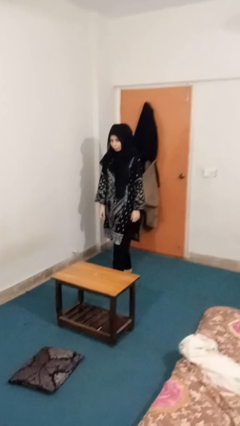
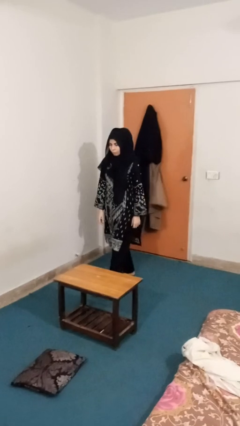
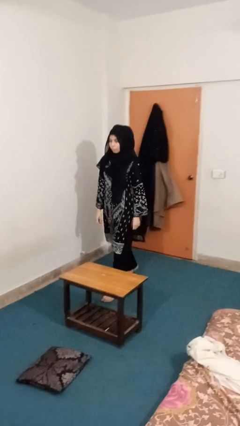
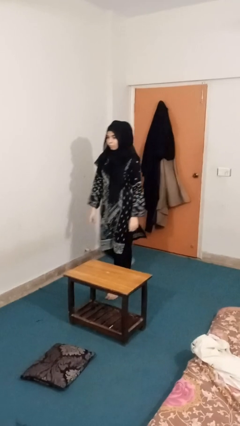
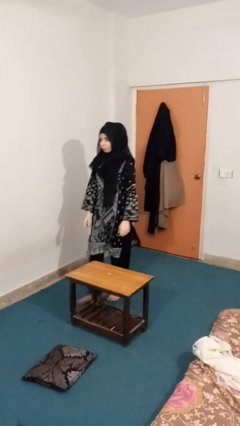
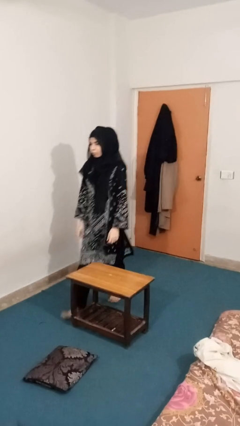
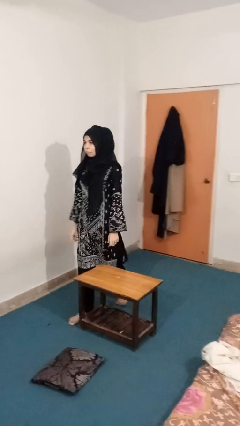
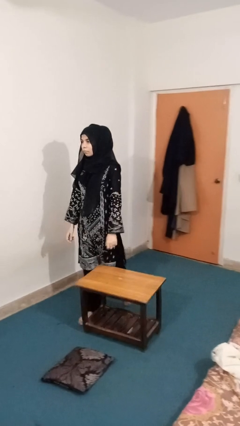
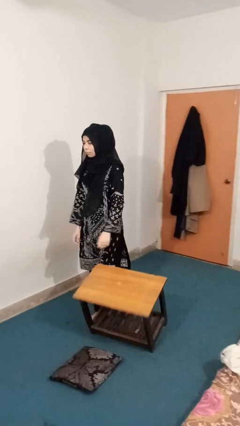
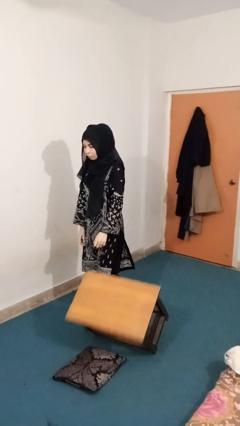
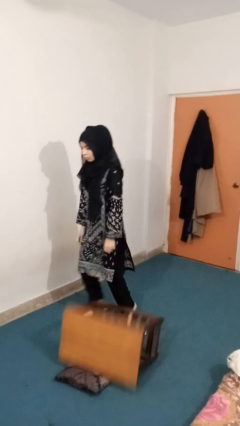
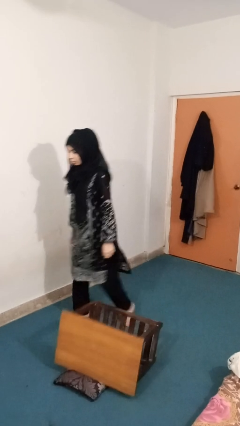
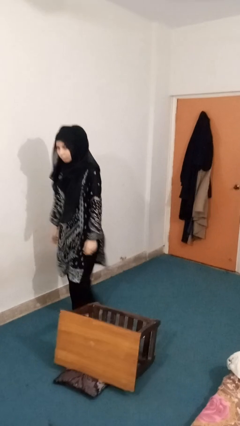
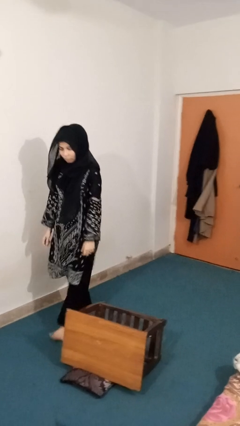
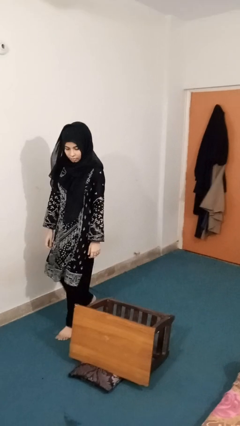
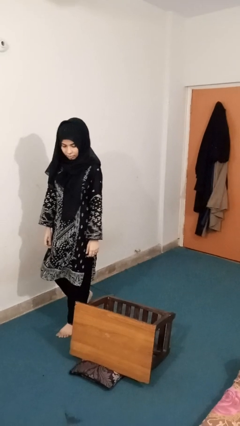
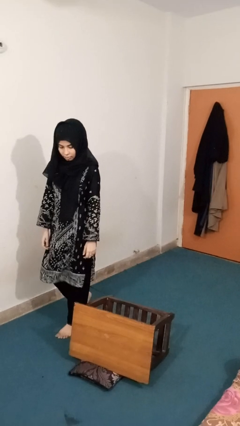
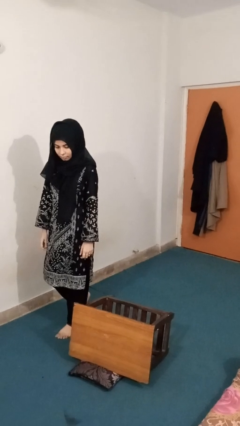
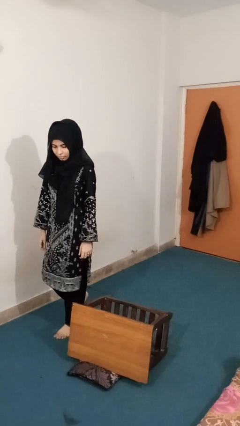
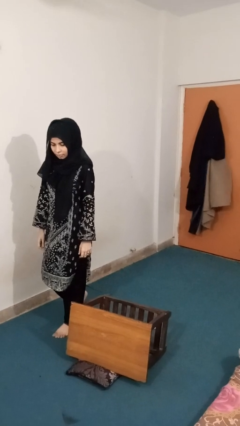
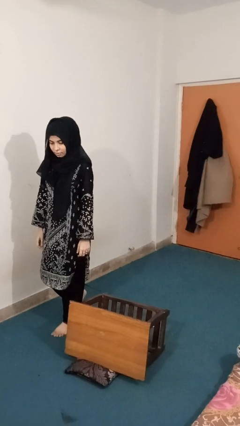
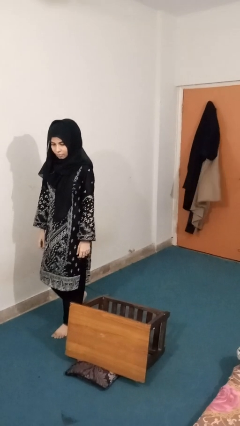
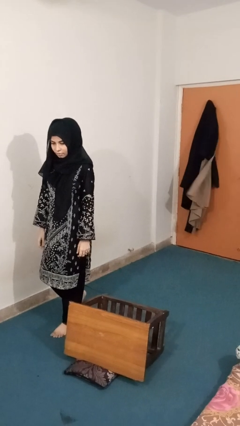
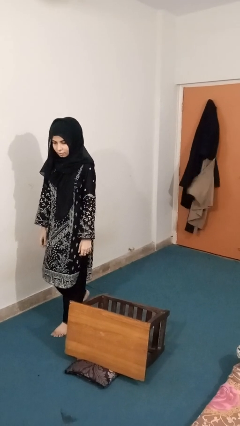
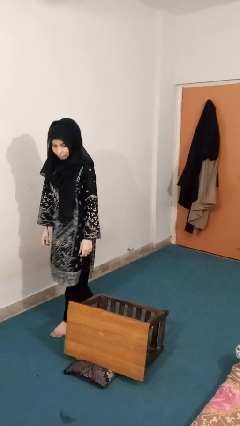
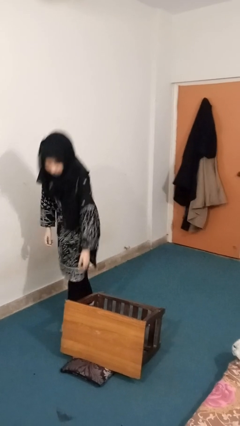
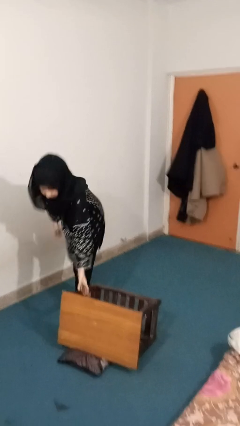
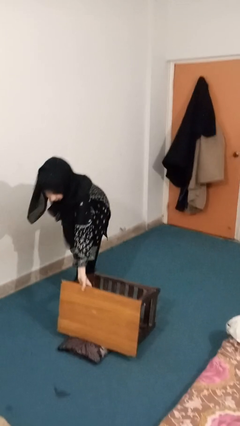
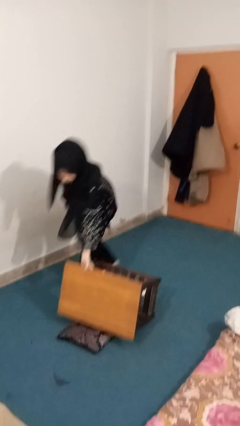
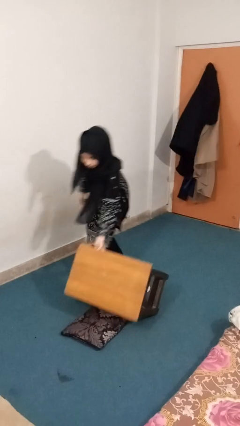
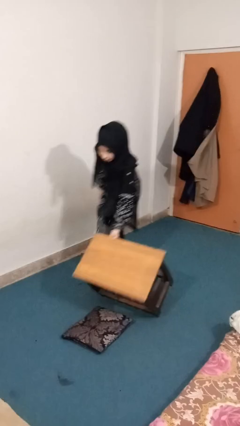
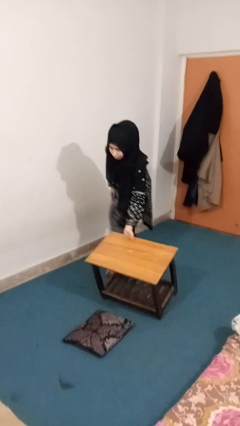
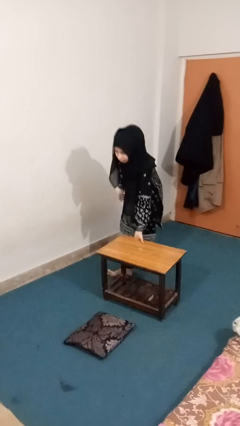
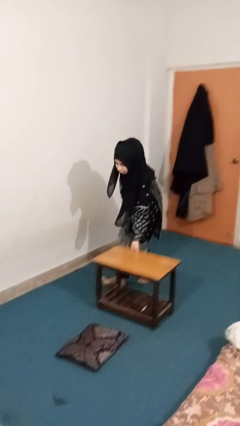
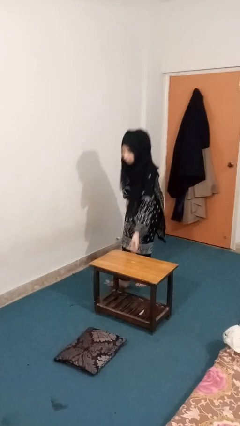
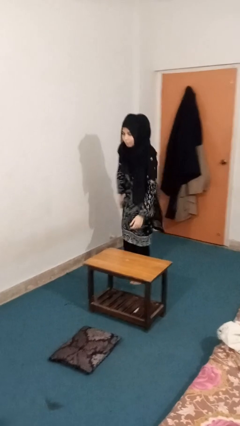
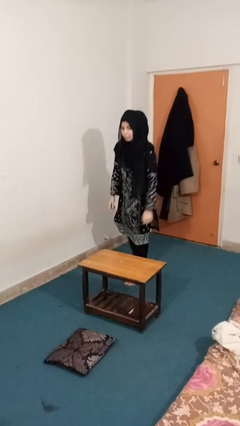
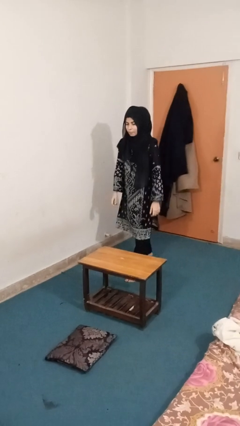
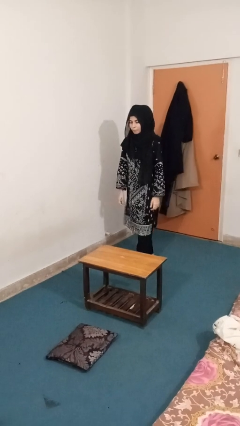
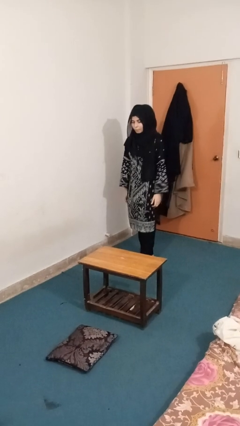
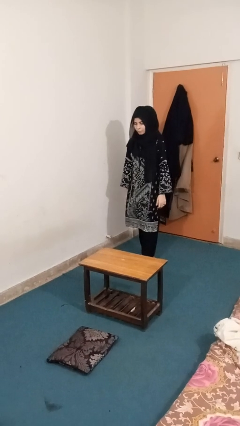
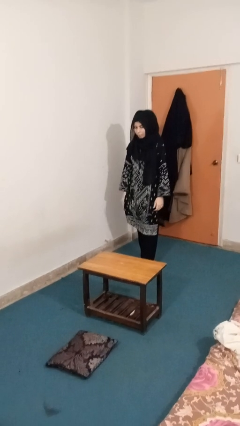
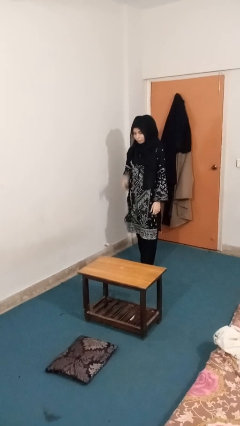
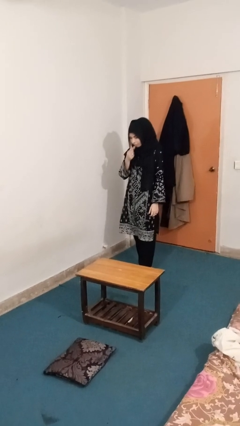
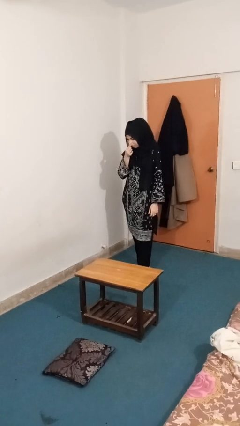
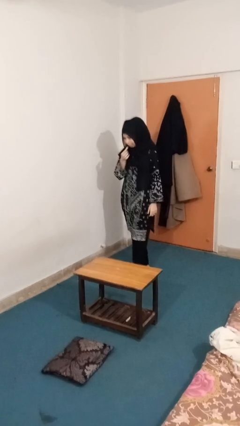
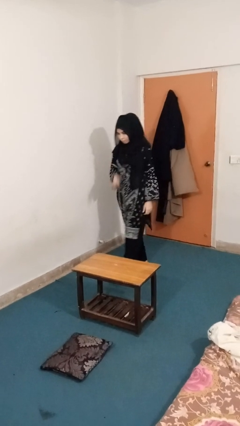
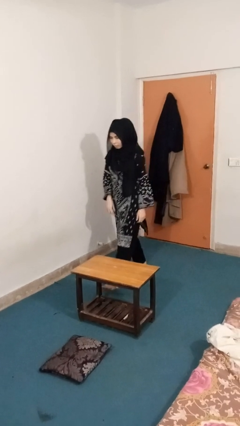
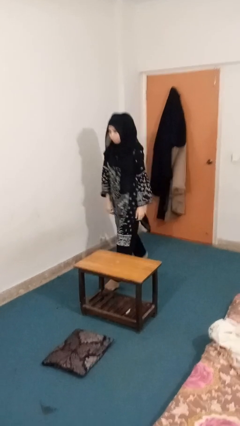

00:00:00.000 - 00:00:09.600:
person knocks over furniture

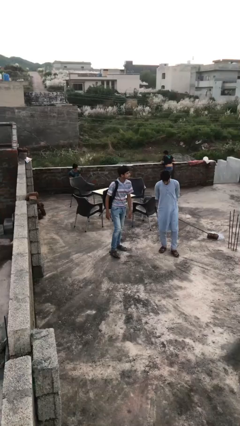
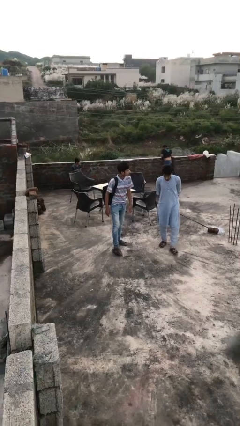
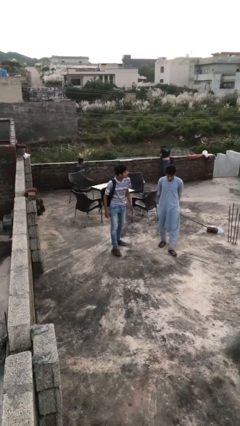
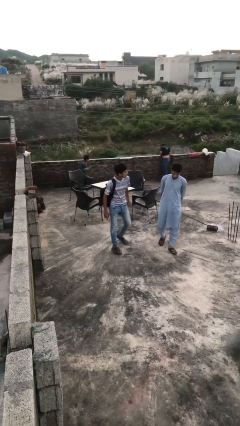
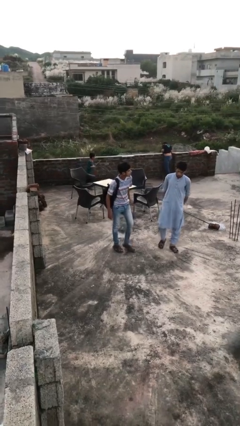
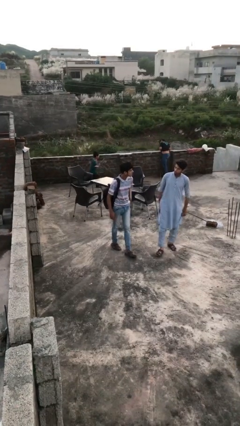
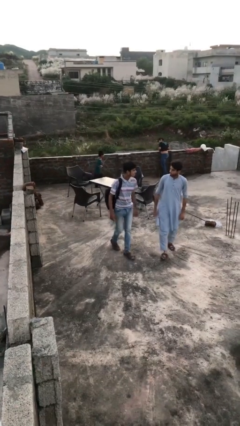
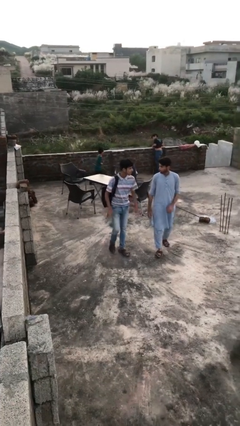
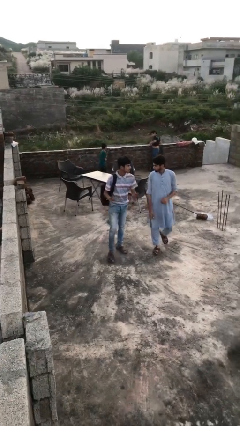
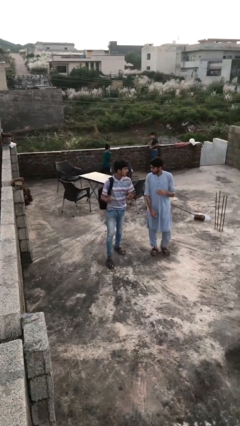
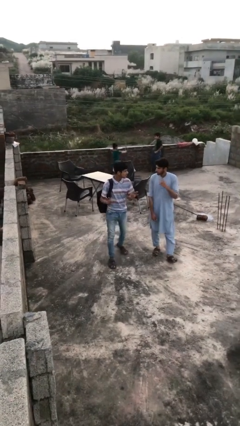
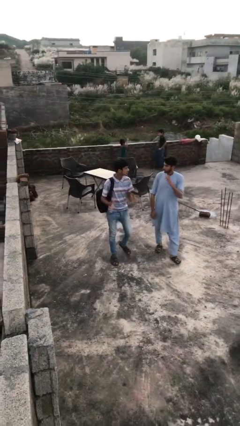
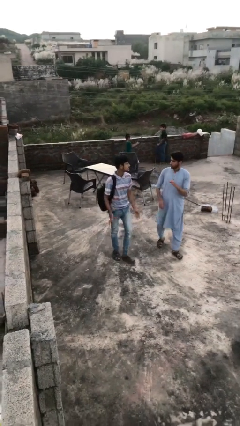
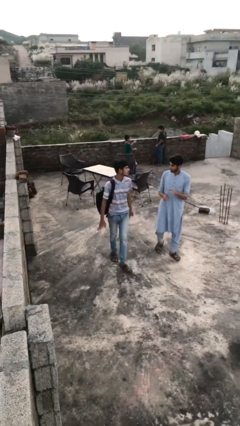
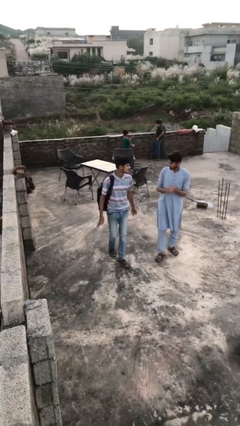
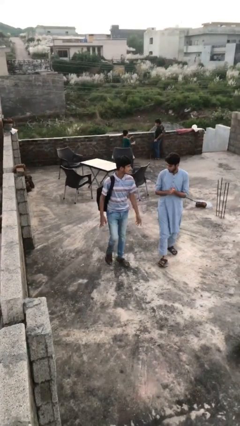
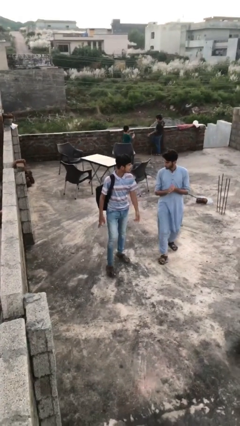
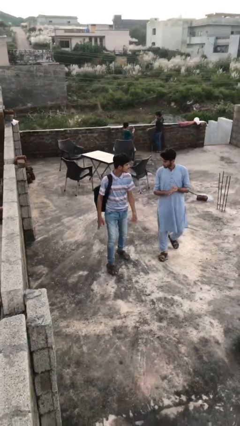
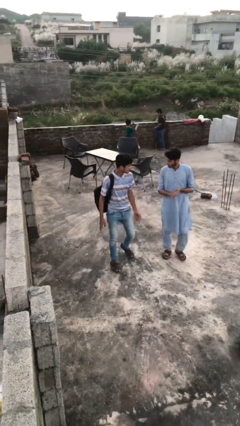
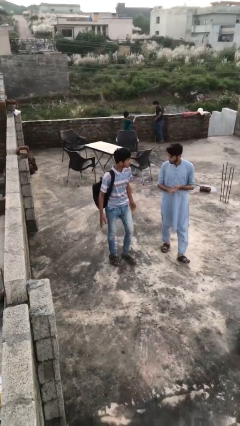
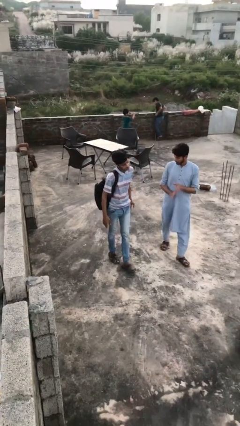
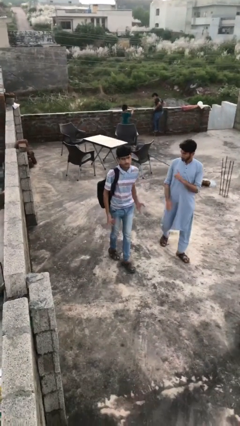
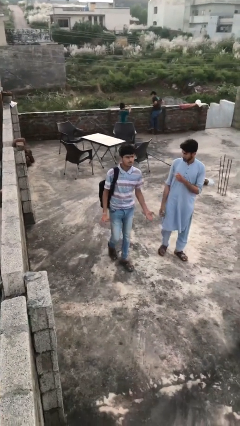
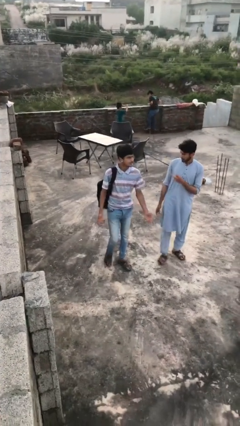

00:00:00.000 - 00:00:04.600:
person talks to person

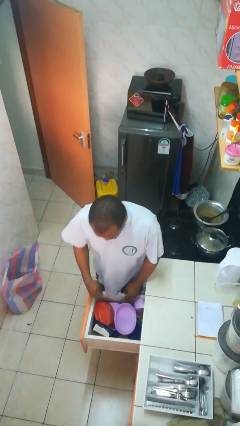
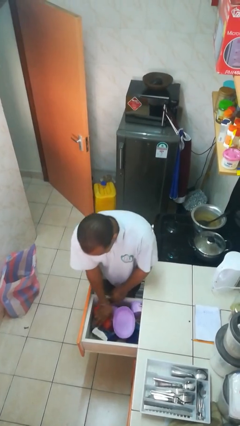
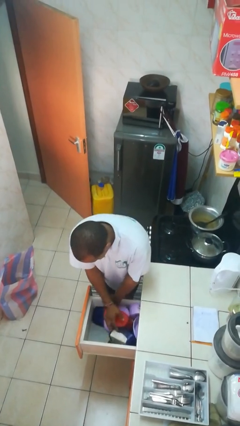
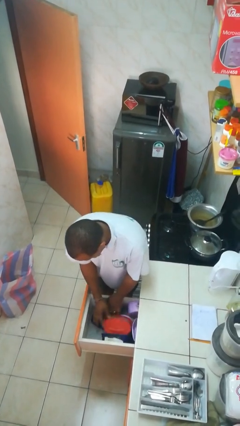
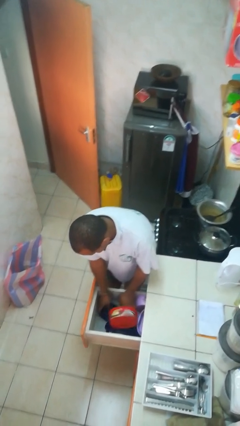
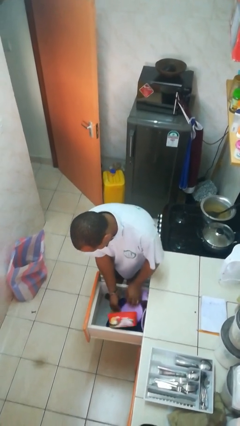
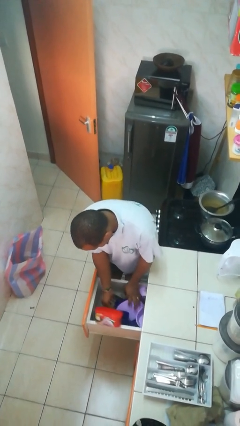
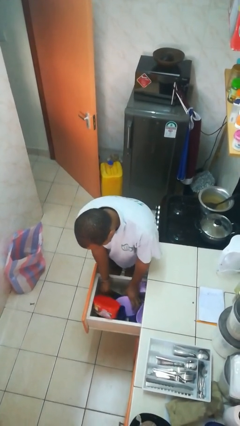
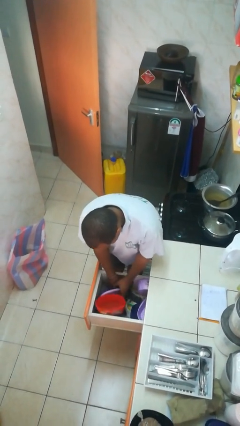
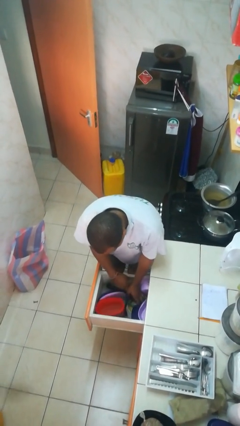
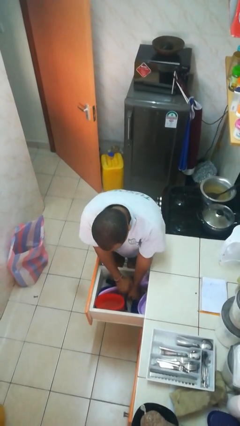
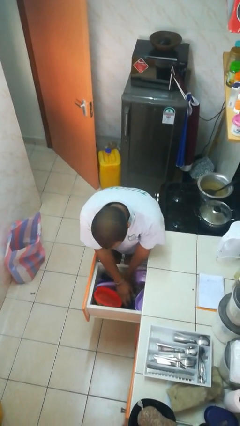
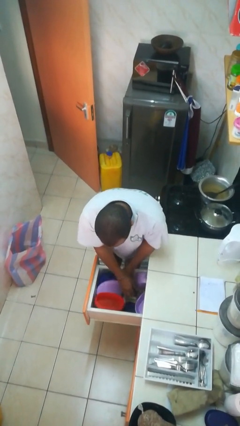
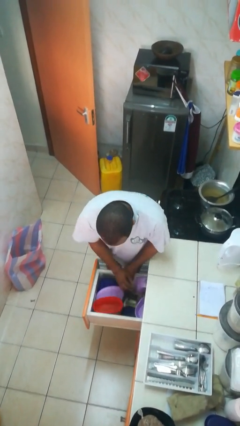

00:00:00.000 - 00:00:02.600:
person searches in kitchen drawer

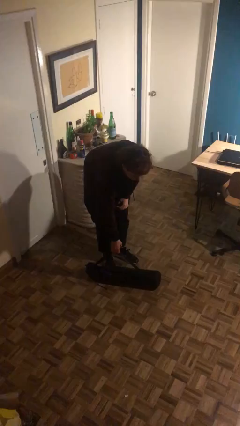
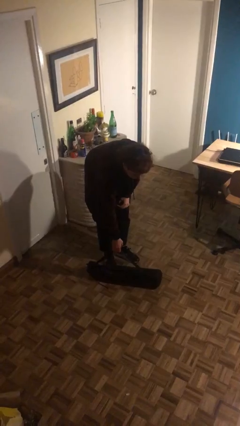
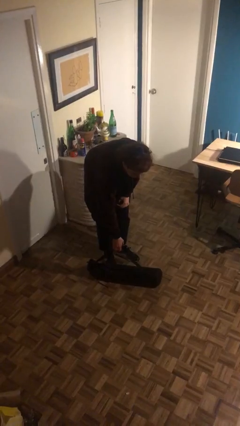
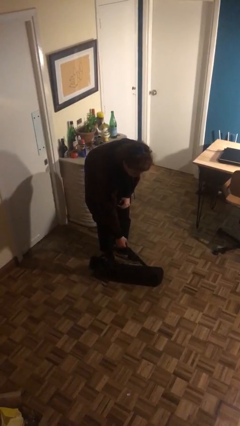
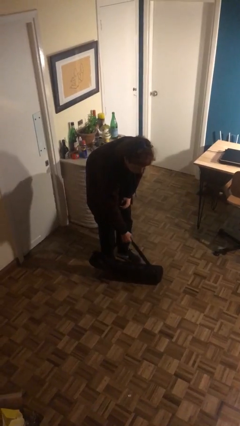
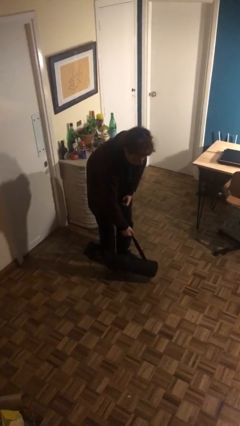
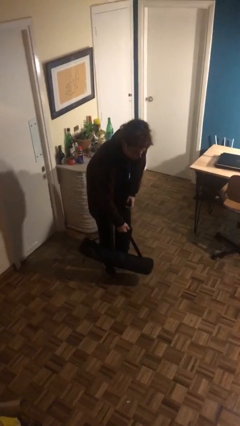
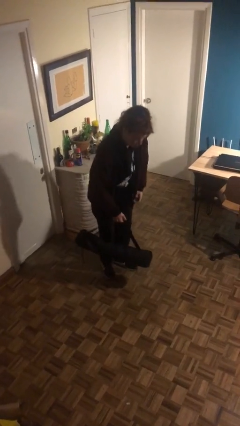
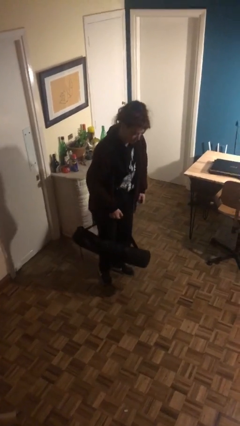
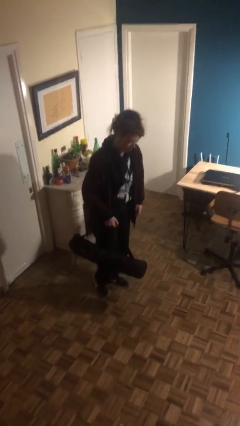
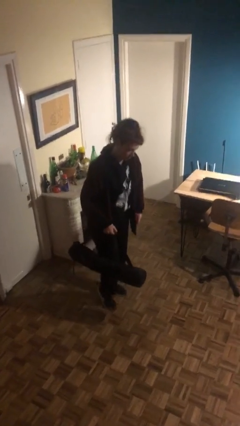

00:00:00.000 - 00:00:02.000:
person picks up object from floor
